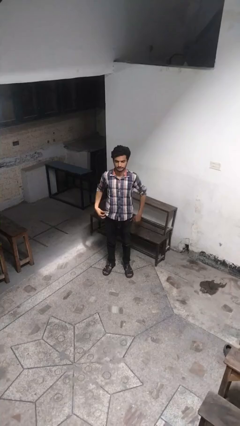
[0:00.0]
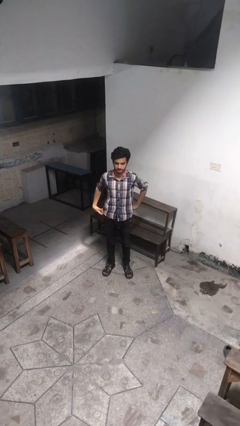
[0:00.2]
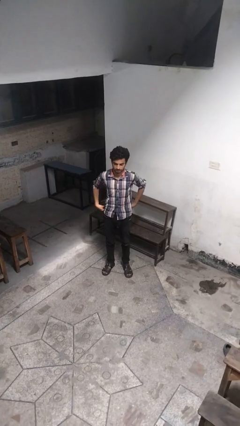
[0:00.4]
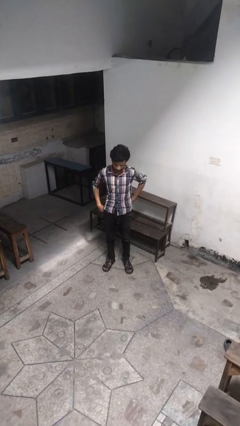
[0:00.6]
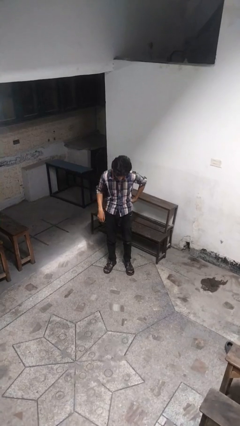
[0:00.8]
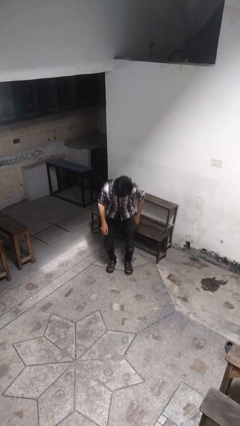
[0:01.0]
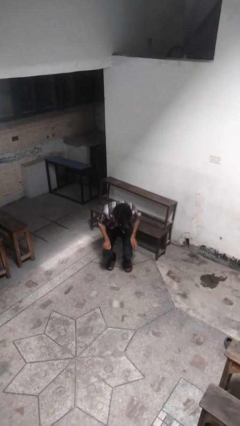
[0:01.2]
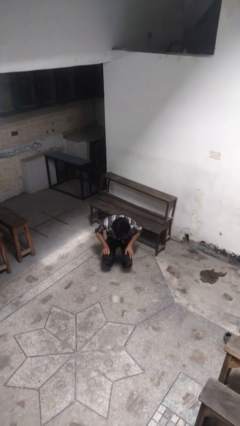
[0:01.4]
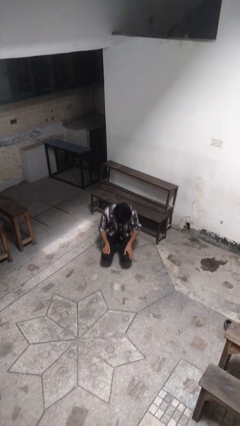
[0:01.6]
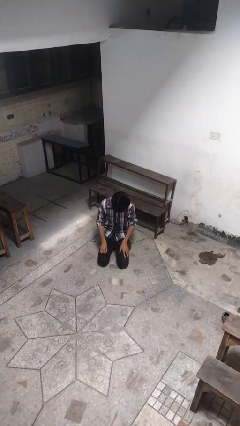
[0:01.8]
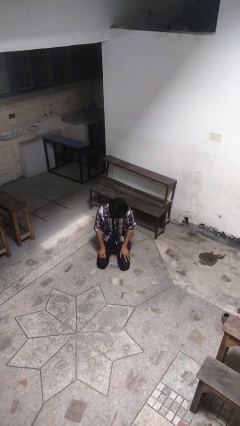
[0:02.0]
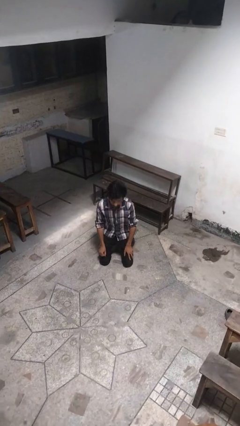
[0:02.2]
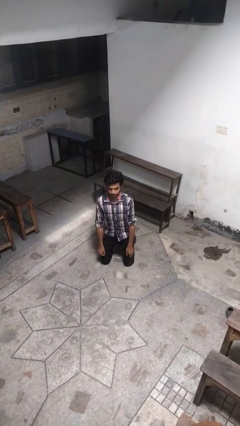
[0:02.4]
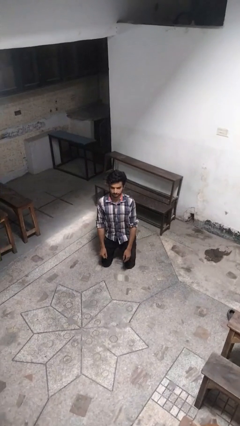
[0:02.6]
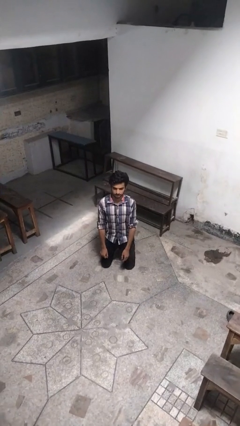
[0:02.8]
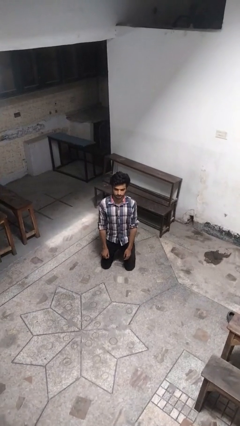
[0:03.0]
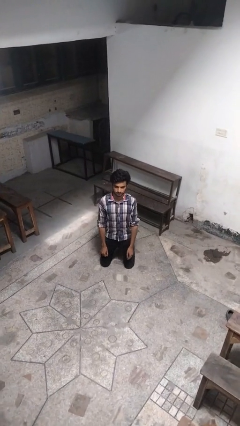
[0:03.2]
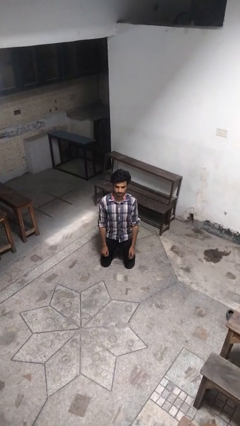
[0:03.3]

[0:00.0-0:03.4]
person kneels

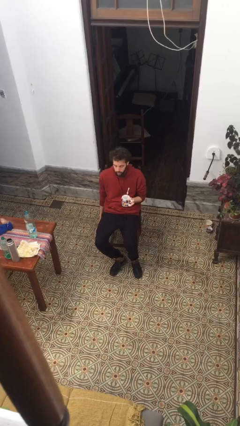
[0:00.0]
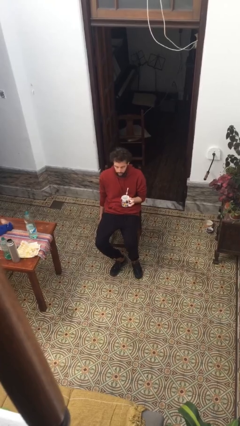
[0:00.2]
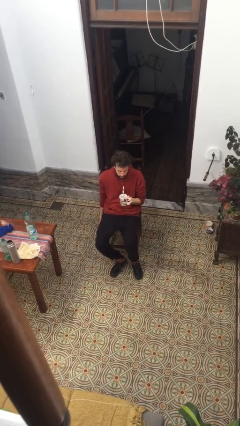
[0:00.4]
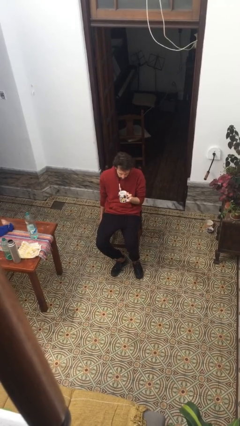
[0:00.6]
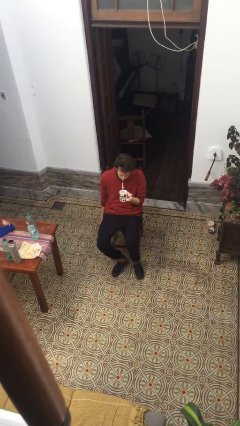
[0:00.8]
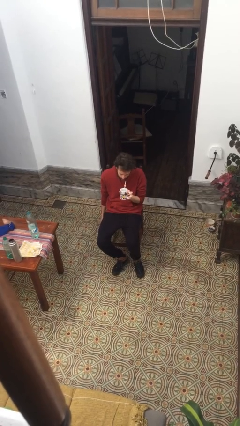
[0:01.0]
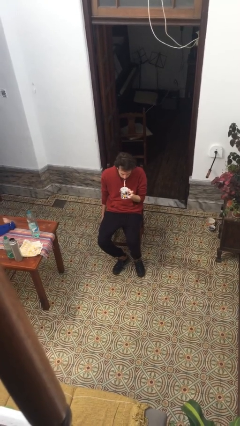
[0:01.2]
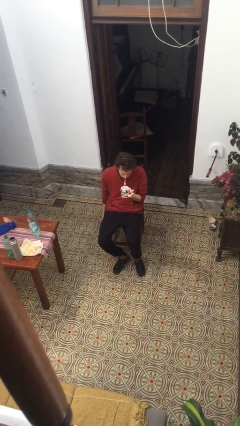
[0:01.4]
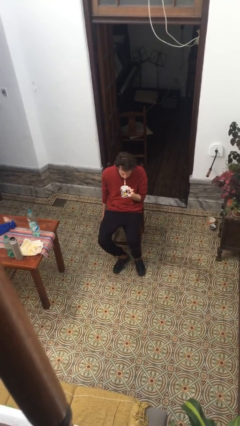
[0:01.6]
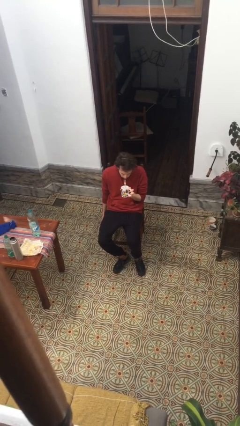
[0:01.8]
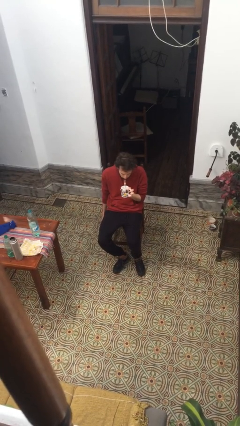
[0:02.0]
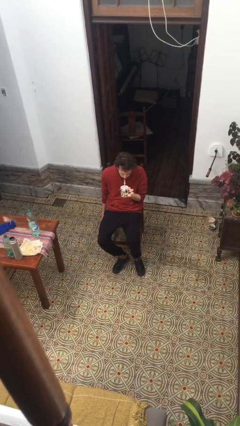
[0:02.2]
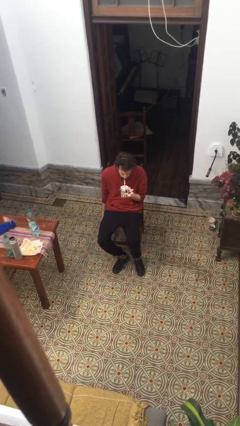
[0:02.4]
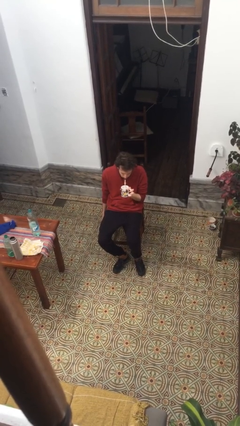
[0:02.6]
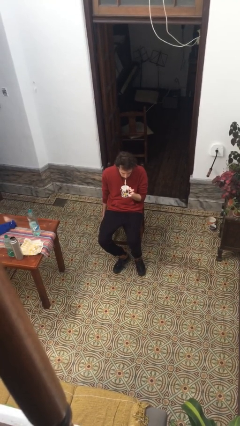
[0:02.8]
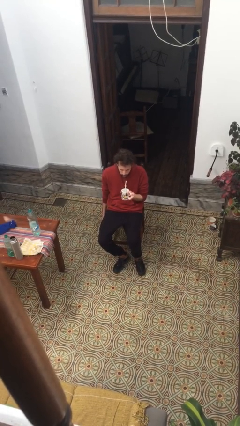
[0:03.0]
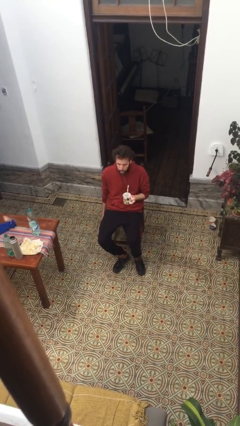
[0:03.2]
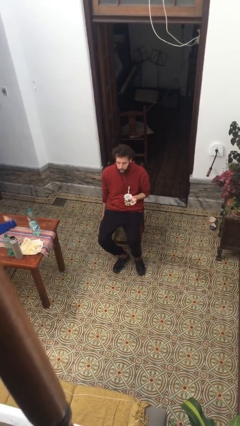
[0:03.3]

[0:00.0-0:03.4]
person drinks from straw

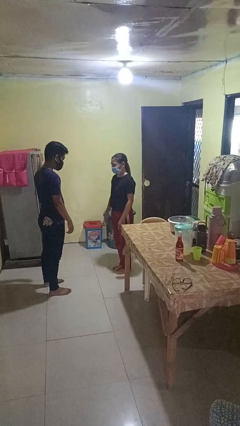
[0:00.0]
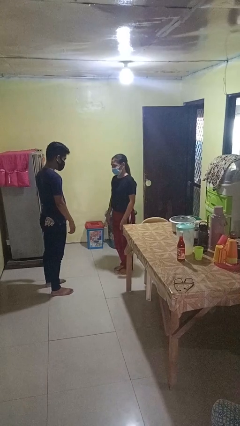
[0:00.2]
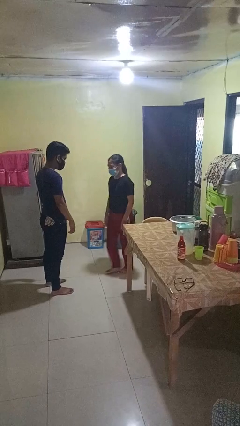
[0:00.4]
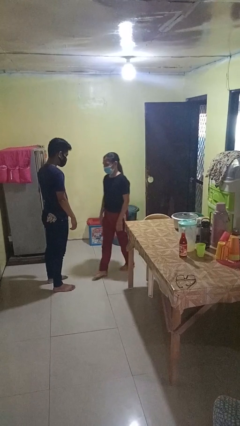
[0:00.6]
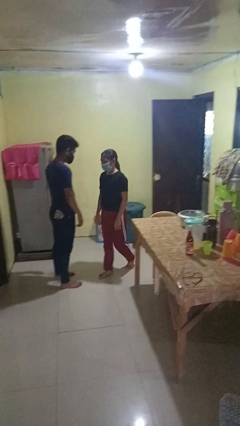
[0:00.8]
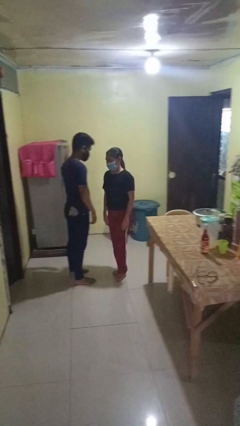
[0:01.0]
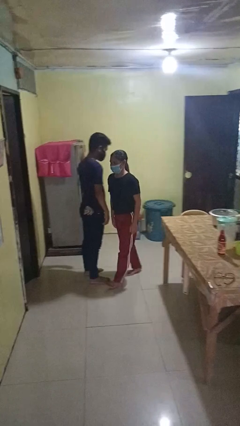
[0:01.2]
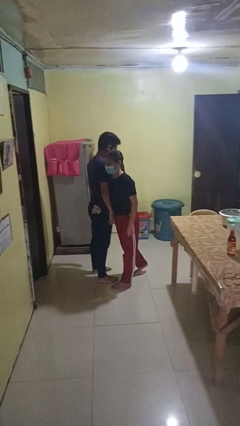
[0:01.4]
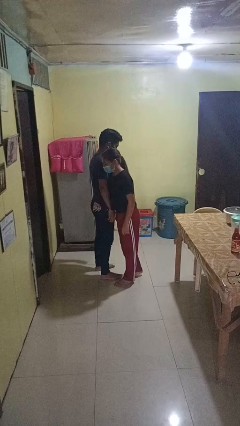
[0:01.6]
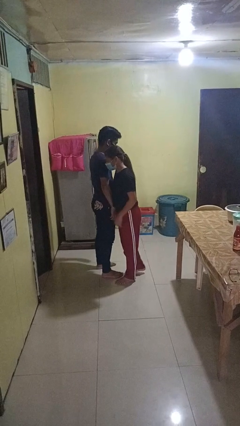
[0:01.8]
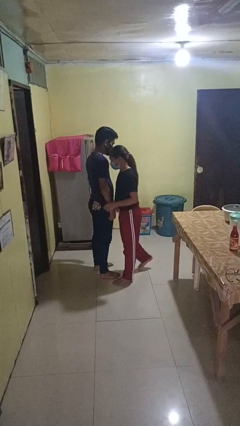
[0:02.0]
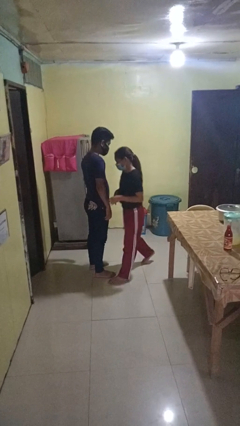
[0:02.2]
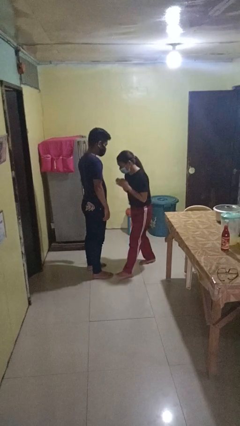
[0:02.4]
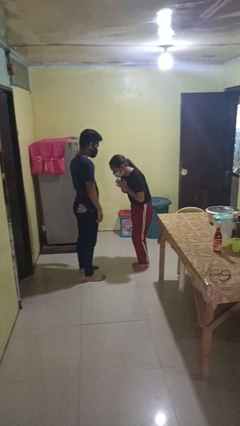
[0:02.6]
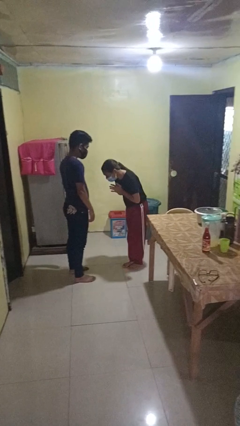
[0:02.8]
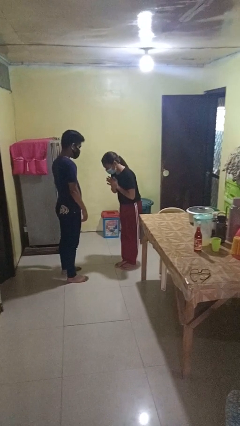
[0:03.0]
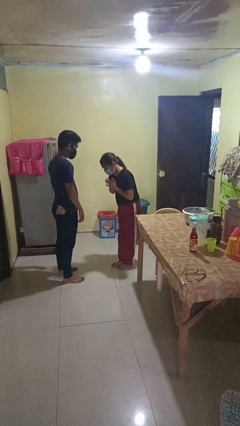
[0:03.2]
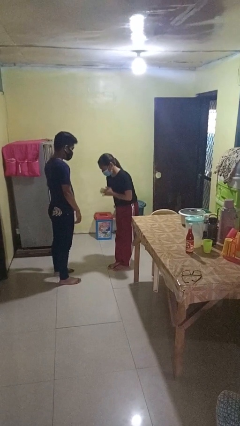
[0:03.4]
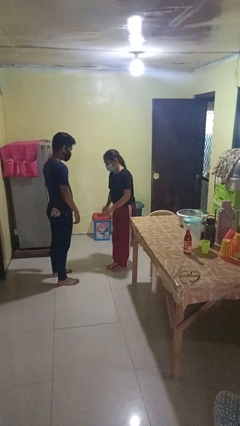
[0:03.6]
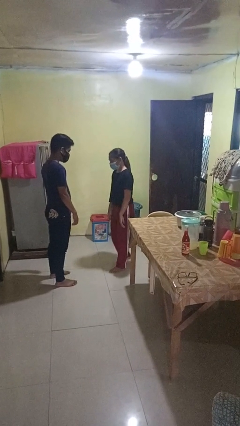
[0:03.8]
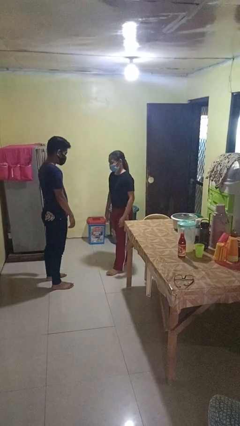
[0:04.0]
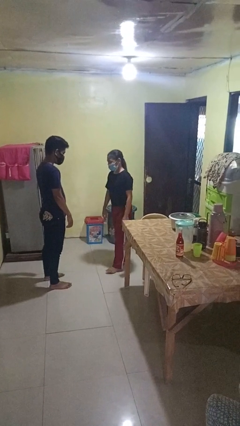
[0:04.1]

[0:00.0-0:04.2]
person bumps into person

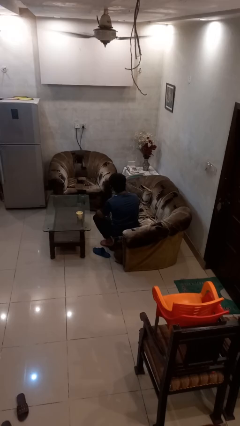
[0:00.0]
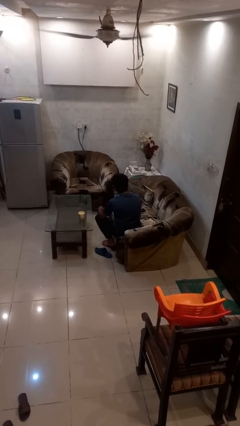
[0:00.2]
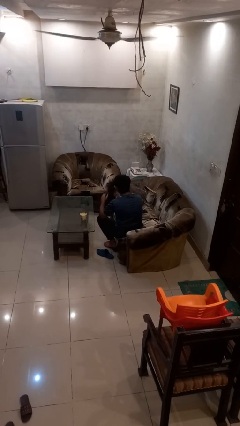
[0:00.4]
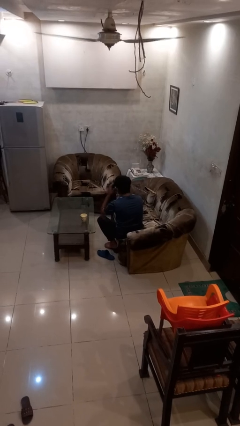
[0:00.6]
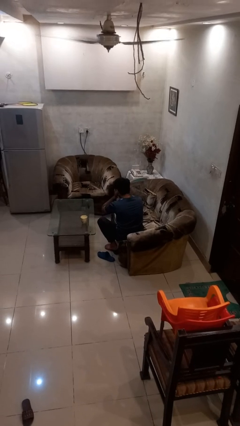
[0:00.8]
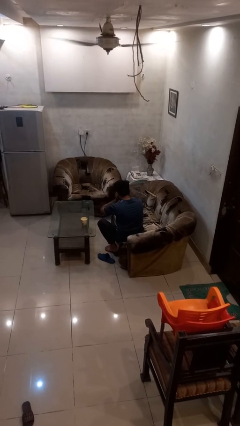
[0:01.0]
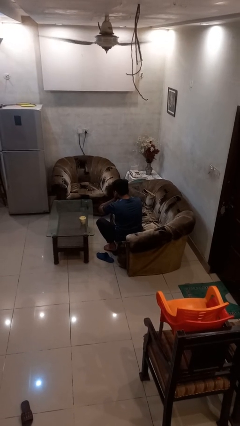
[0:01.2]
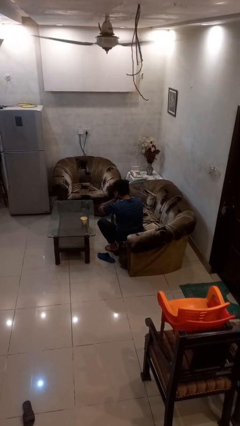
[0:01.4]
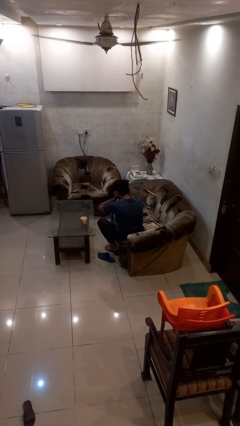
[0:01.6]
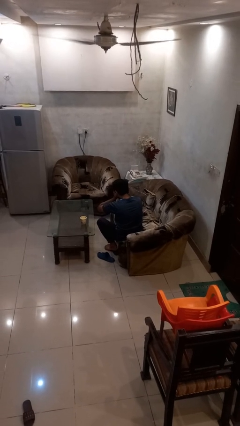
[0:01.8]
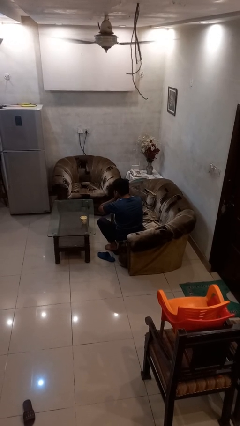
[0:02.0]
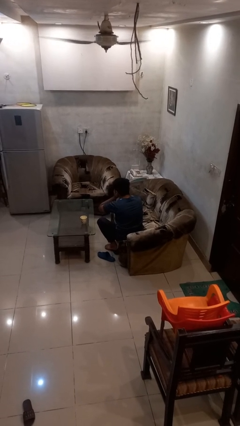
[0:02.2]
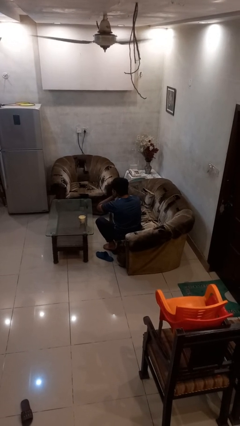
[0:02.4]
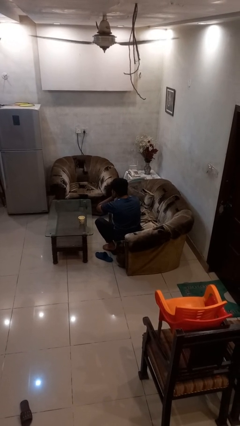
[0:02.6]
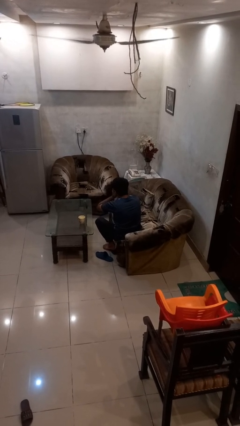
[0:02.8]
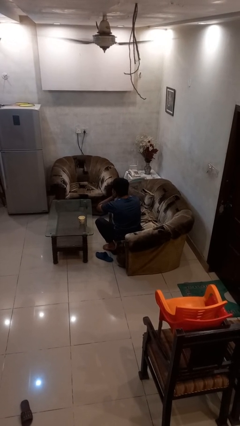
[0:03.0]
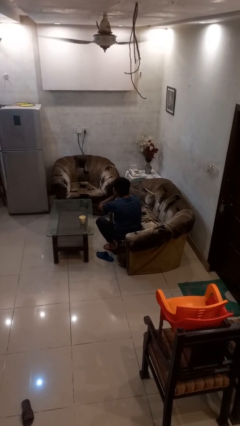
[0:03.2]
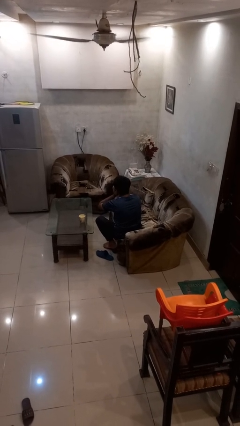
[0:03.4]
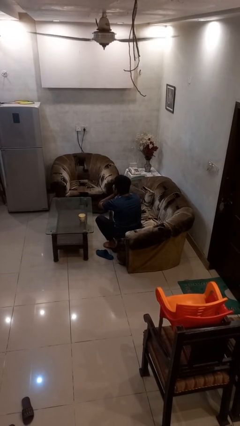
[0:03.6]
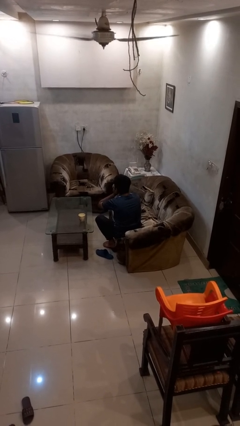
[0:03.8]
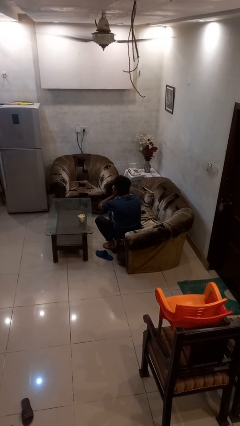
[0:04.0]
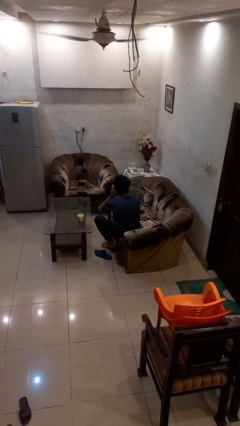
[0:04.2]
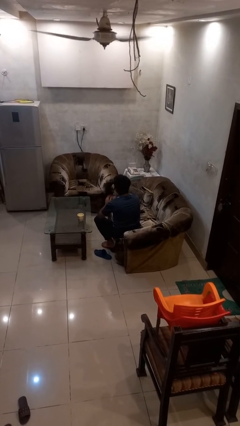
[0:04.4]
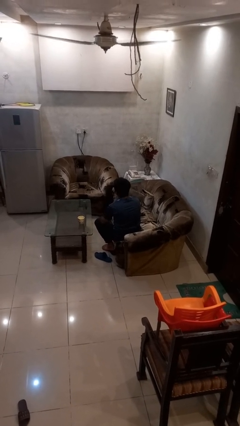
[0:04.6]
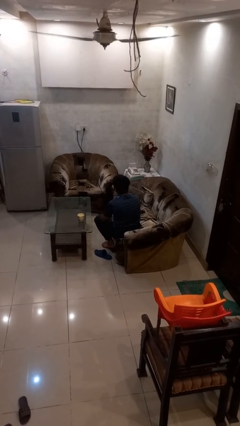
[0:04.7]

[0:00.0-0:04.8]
person covers face with hands

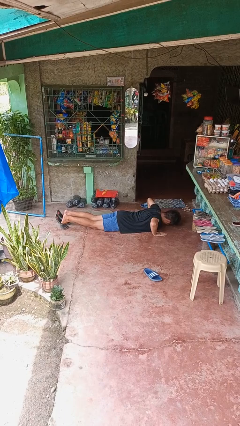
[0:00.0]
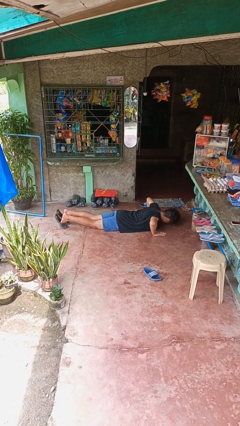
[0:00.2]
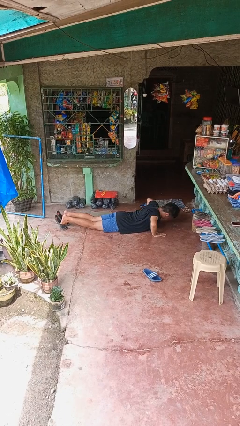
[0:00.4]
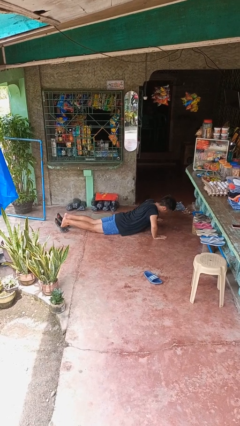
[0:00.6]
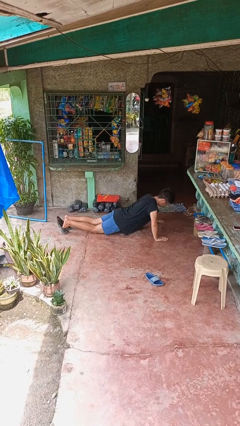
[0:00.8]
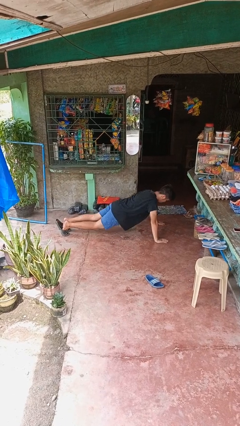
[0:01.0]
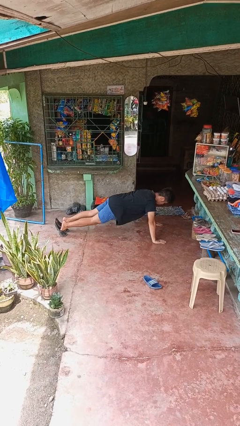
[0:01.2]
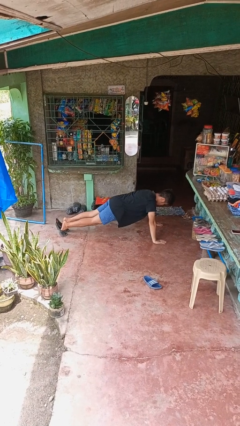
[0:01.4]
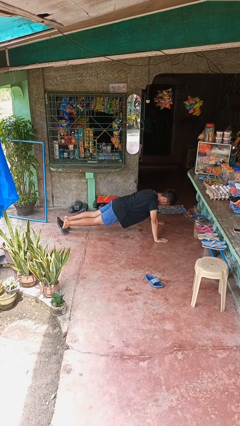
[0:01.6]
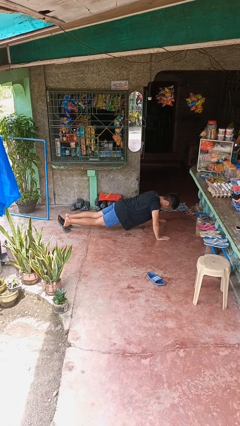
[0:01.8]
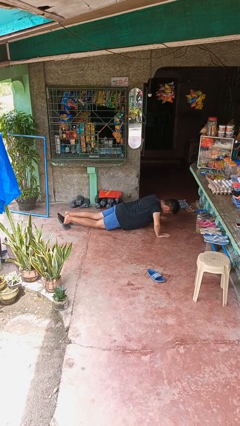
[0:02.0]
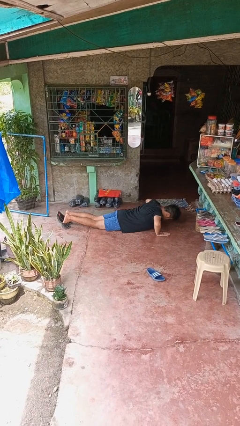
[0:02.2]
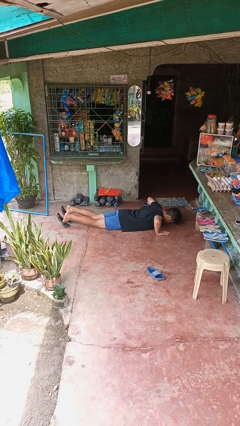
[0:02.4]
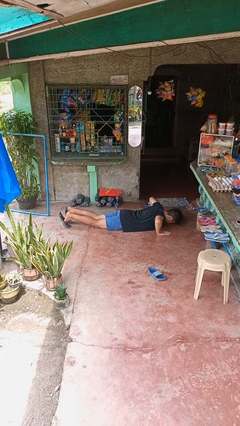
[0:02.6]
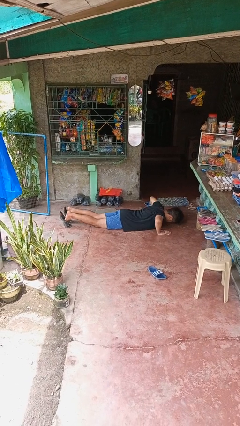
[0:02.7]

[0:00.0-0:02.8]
person exercises with pushup
